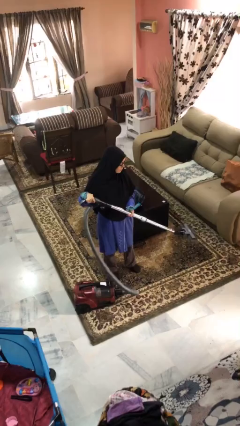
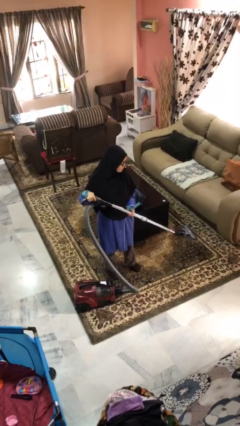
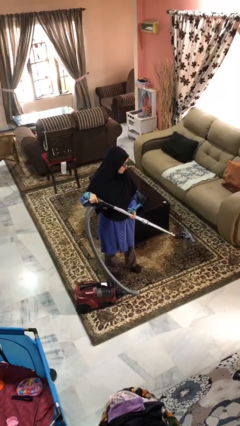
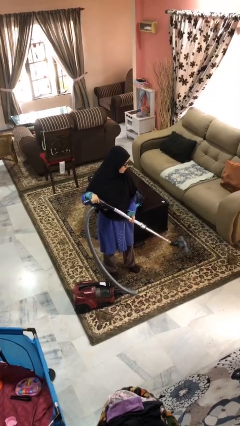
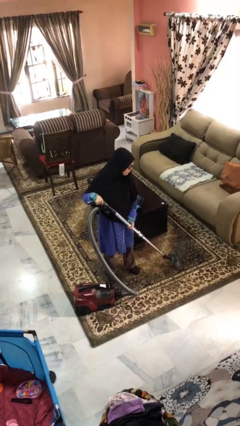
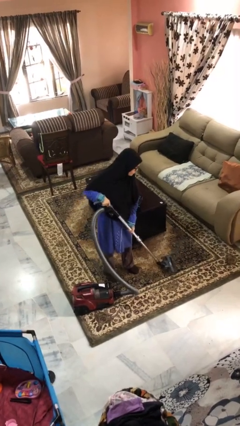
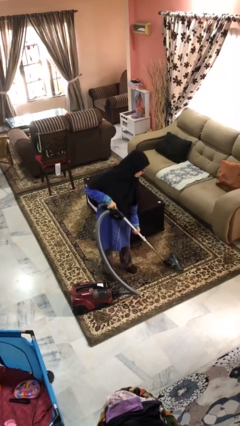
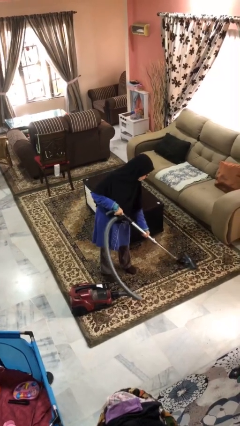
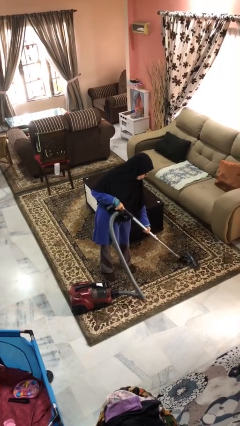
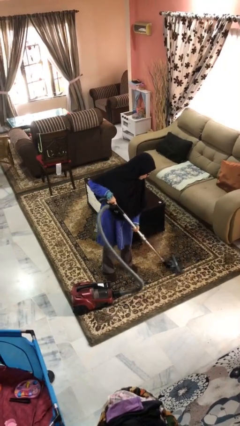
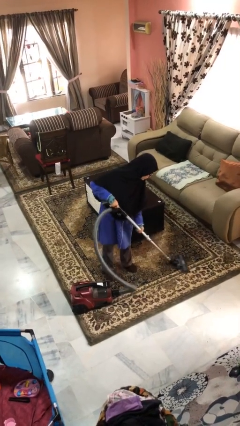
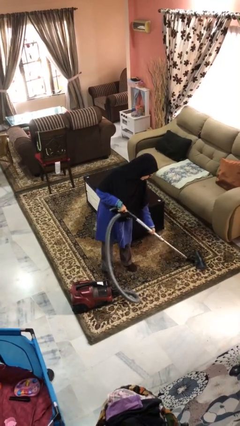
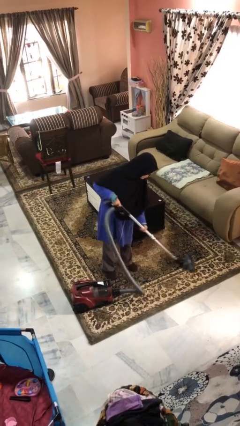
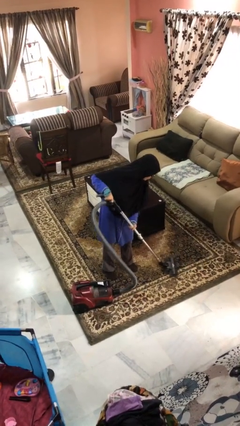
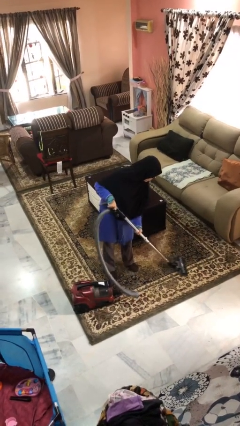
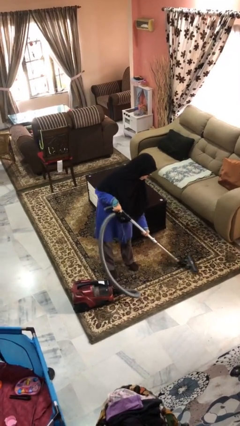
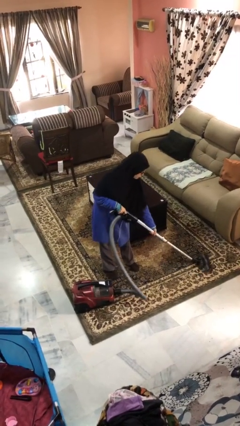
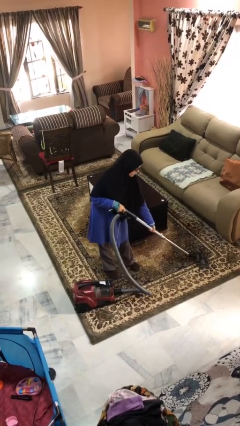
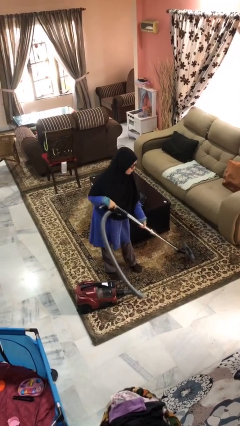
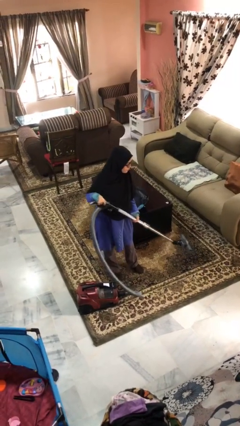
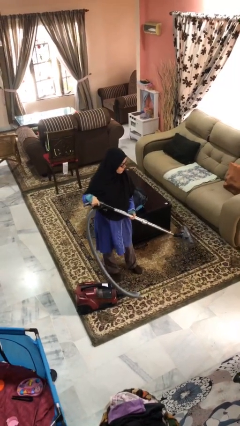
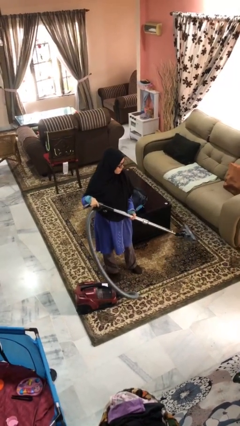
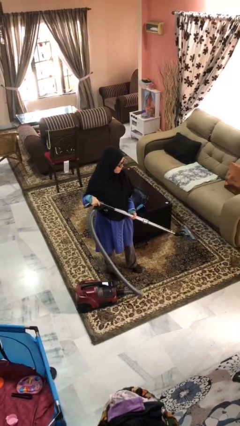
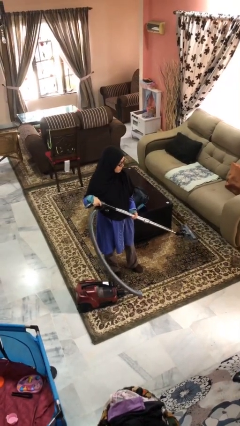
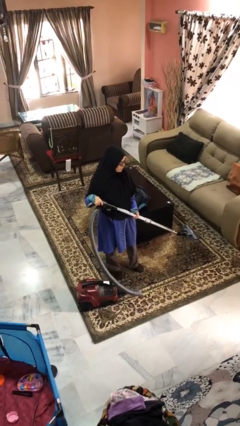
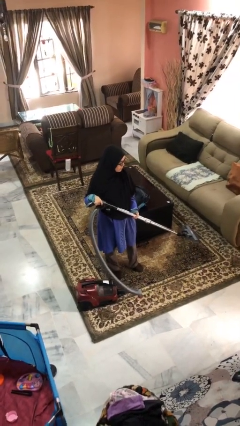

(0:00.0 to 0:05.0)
person vacuums carpet

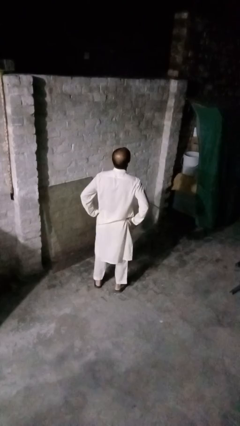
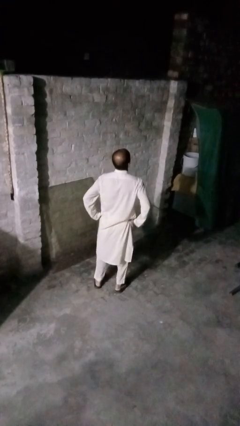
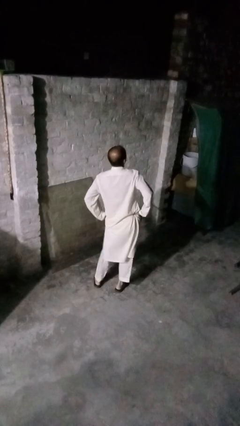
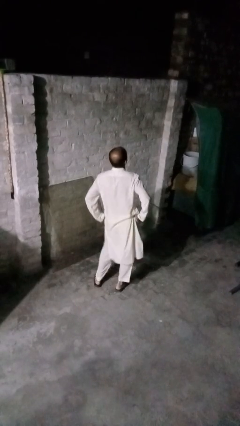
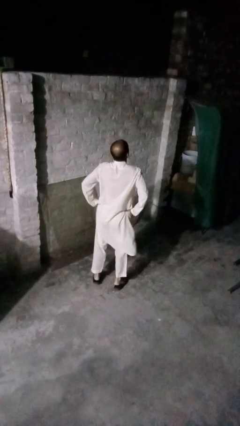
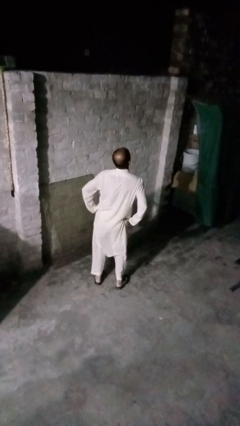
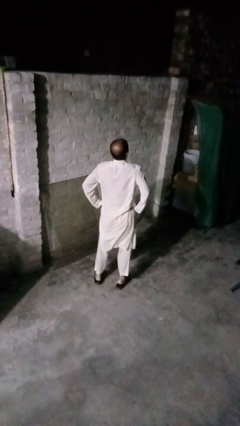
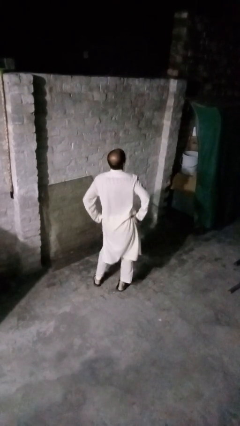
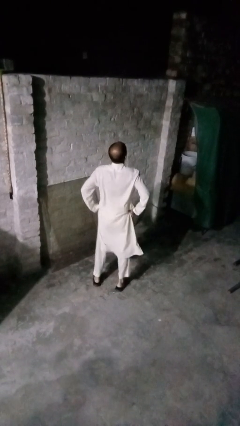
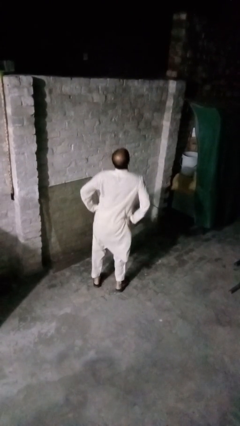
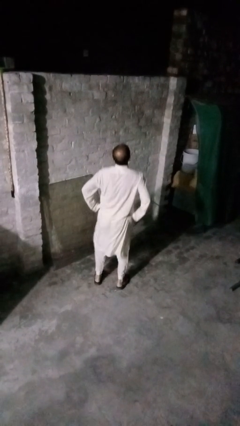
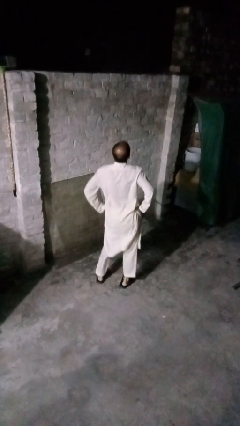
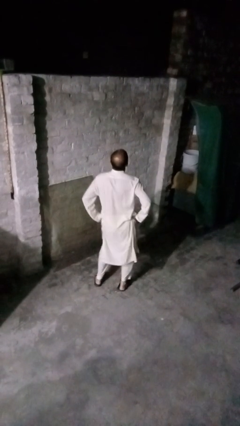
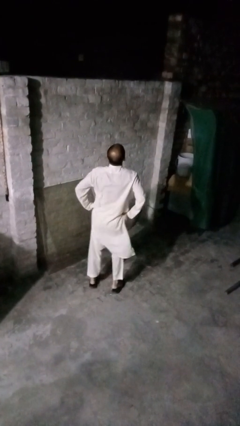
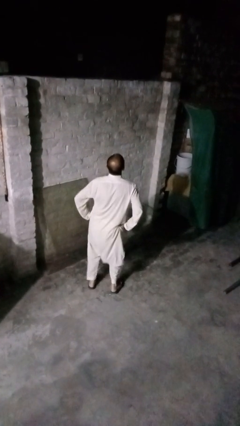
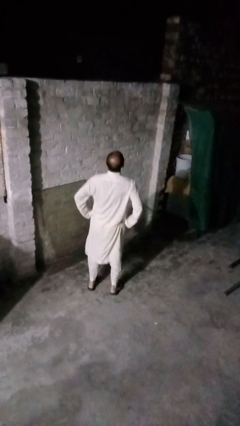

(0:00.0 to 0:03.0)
person wiggles hips

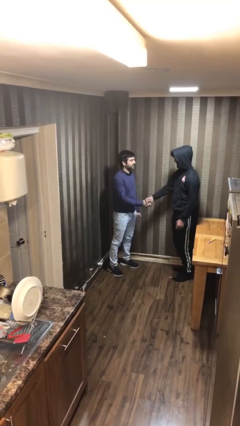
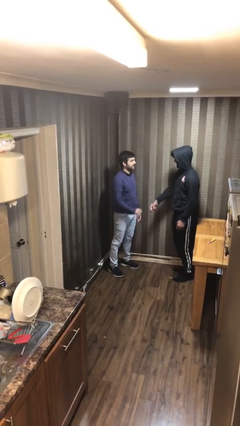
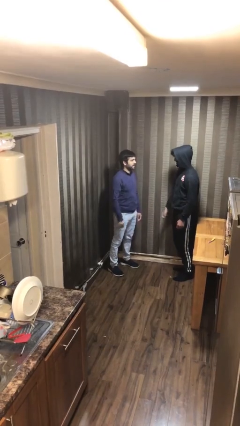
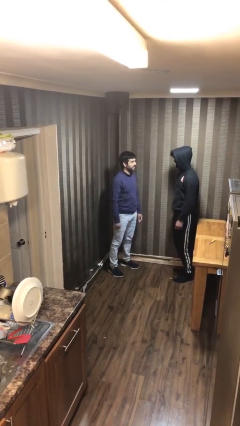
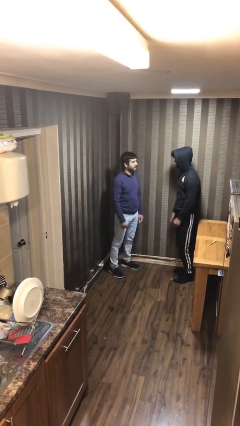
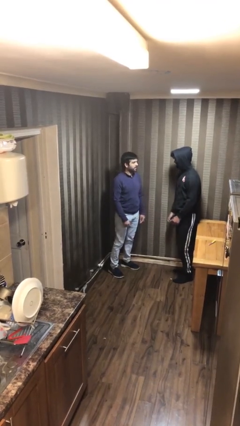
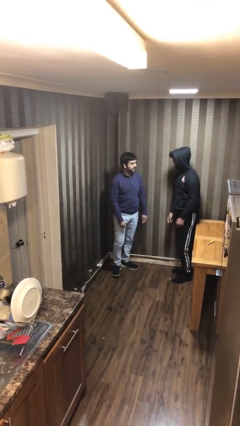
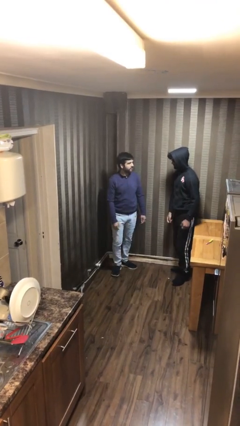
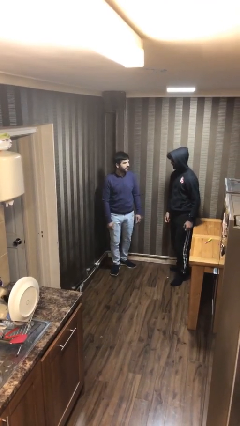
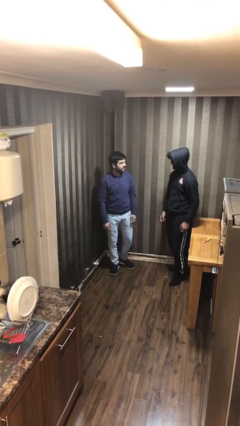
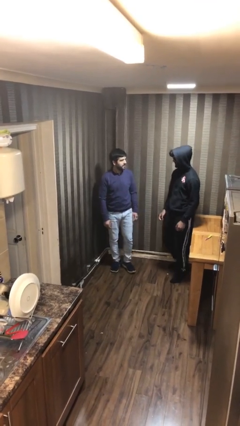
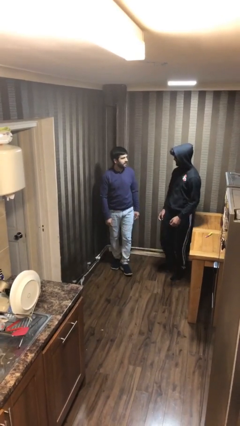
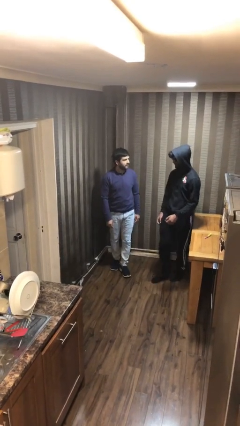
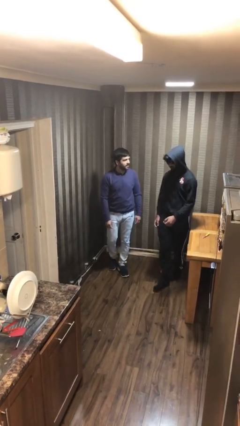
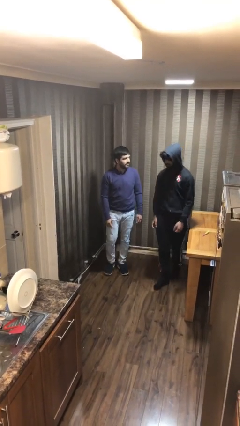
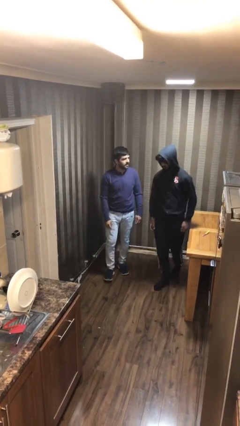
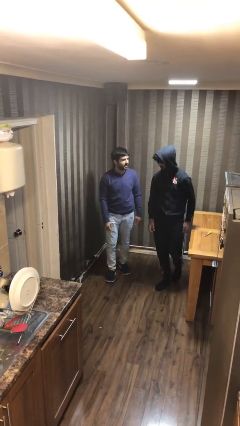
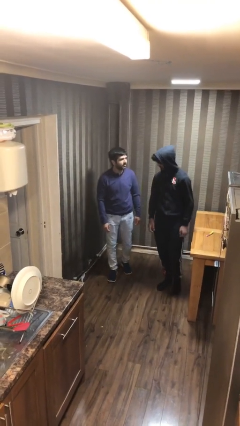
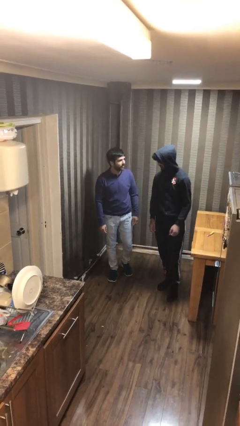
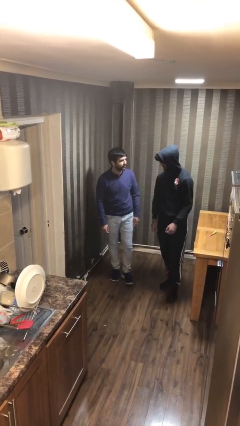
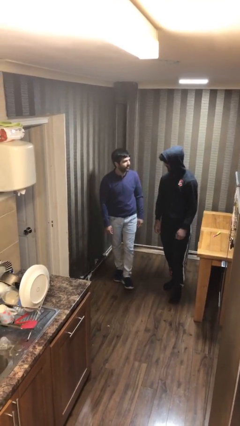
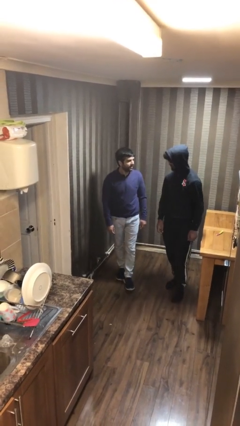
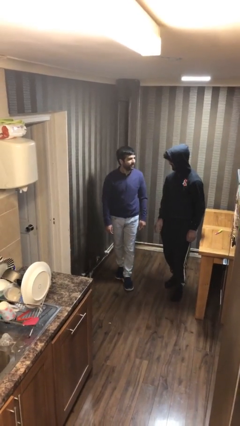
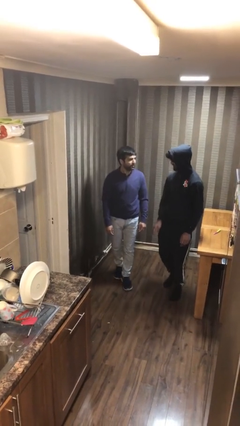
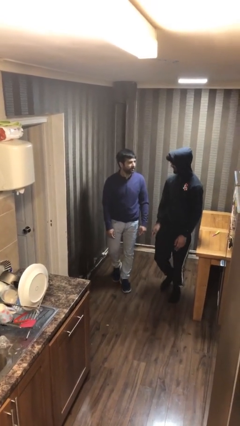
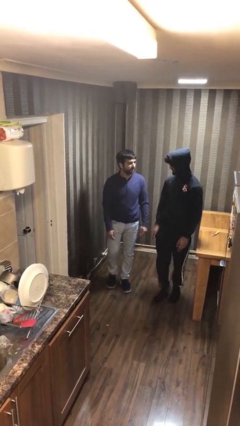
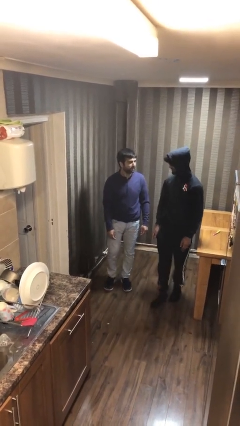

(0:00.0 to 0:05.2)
person talks to person

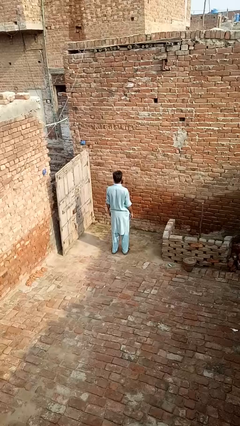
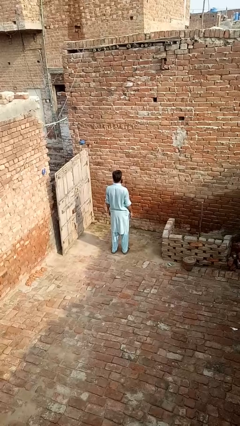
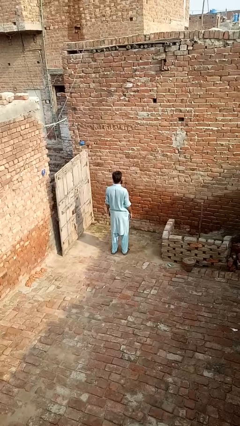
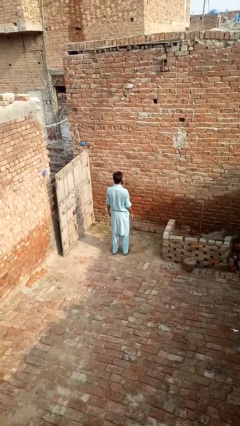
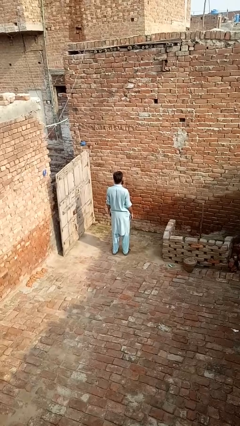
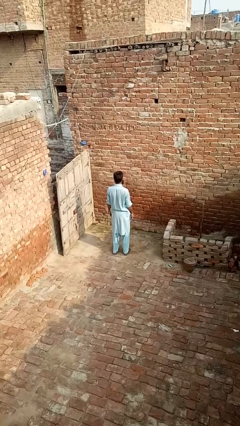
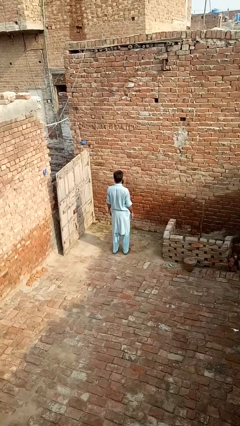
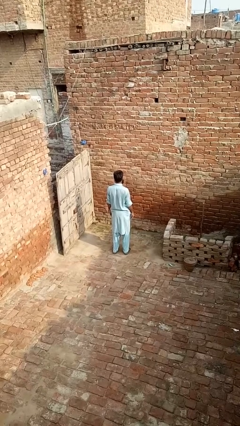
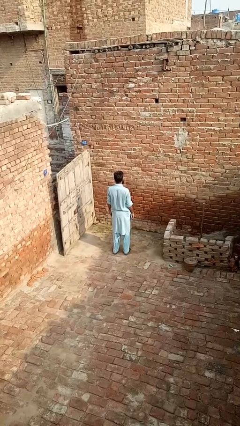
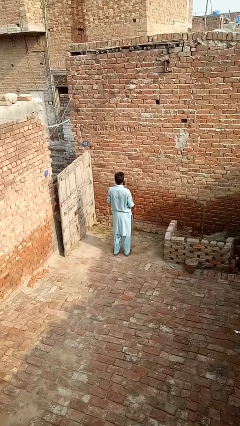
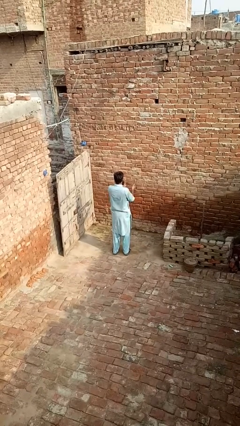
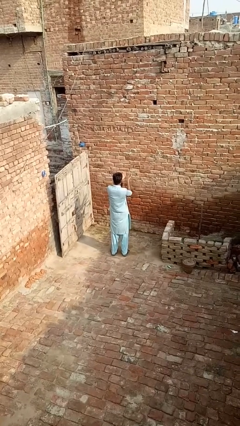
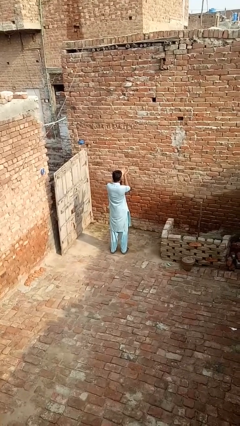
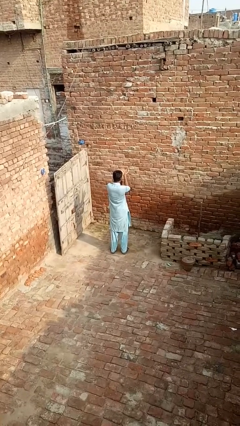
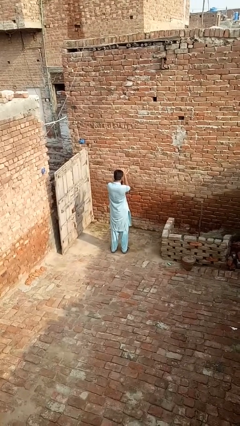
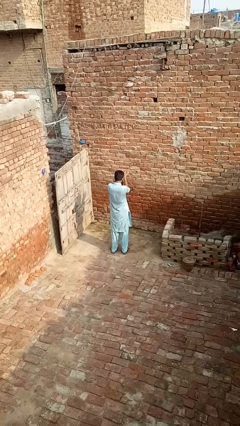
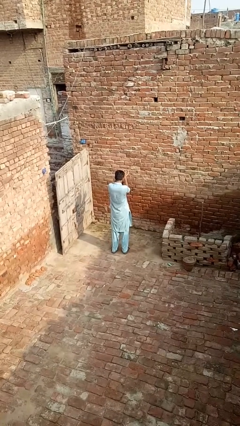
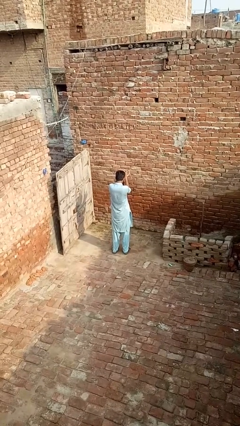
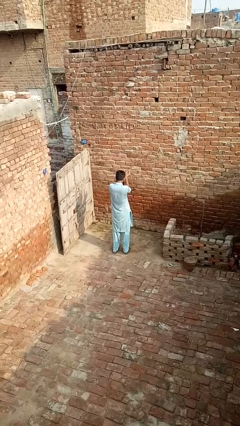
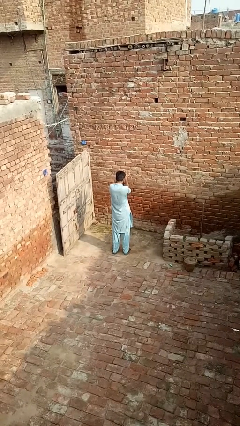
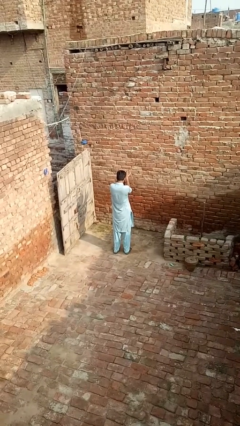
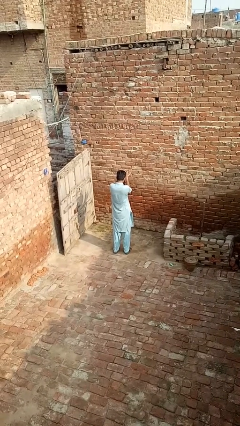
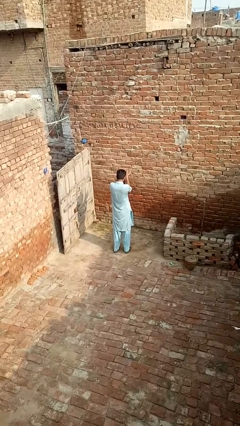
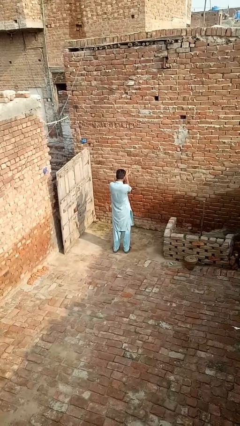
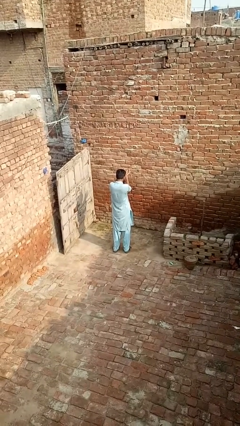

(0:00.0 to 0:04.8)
person prays
